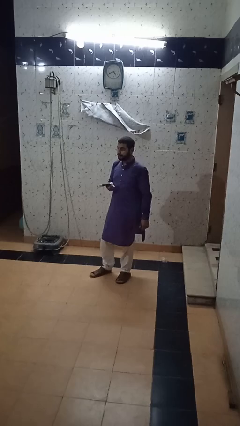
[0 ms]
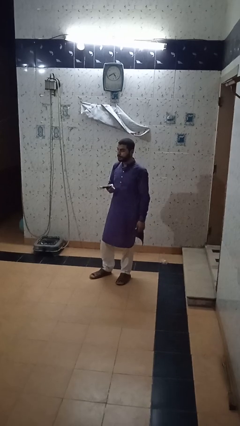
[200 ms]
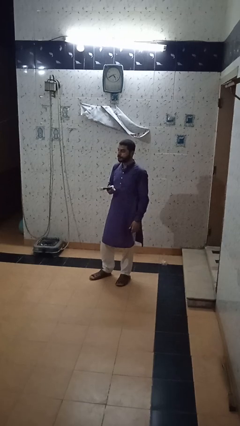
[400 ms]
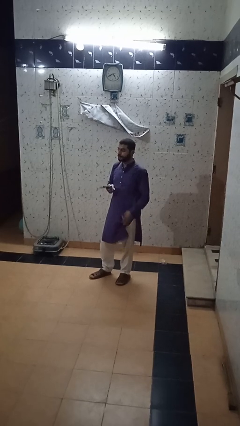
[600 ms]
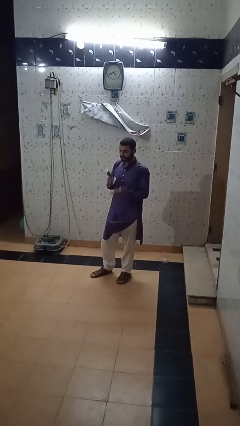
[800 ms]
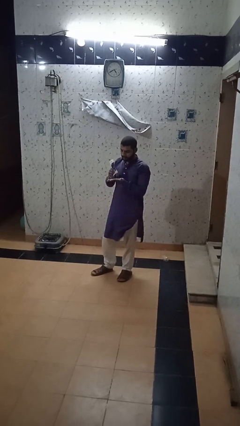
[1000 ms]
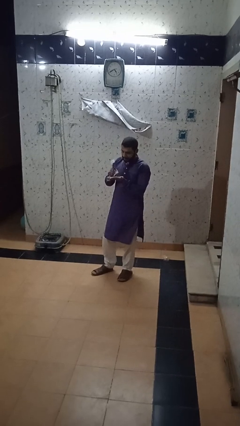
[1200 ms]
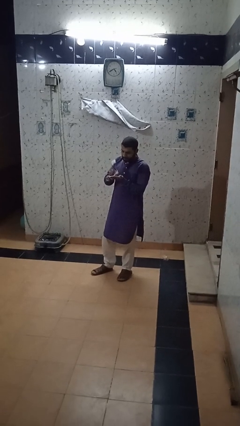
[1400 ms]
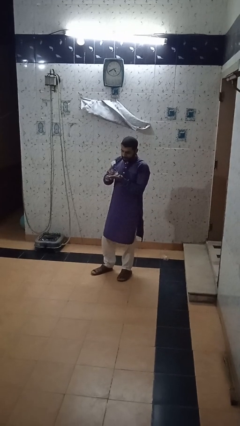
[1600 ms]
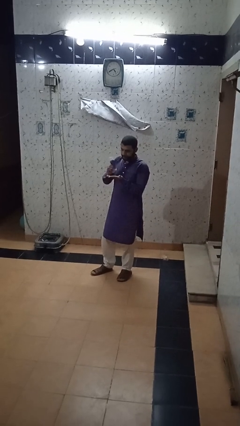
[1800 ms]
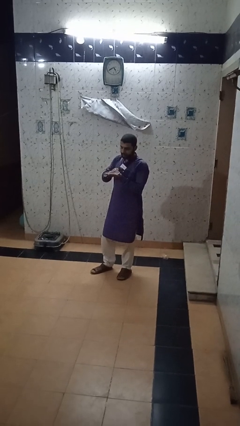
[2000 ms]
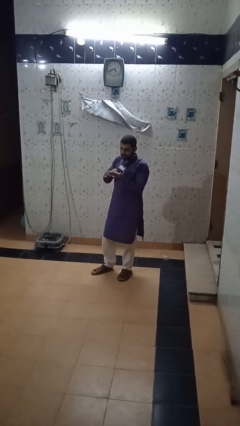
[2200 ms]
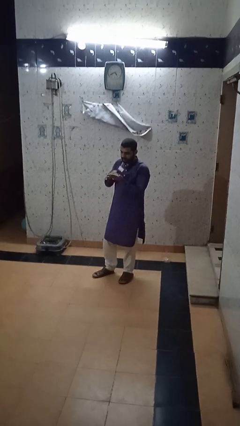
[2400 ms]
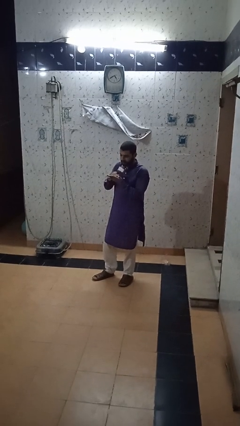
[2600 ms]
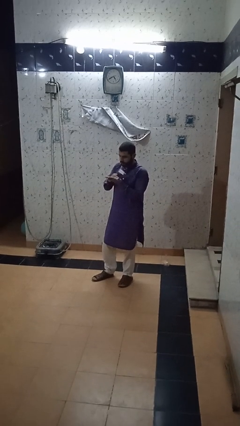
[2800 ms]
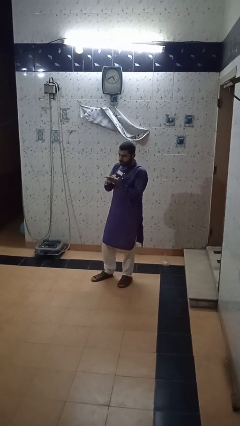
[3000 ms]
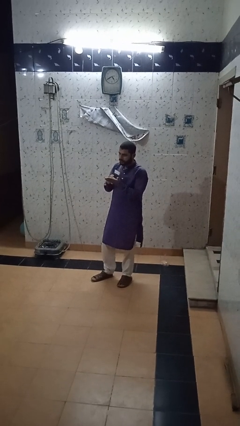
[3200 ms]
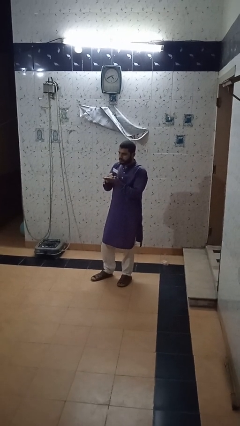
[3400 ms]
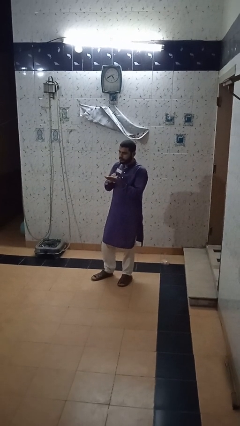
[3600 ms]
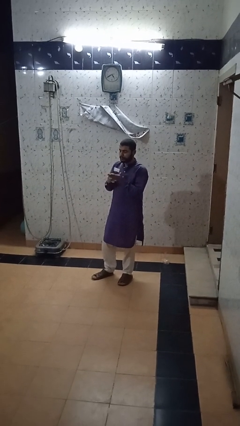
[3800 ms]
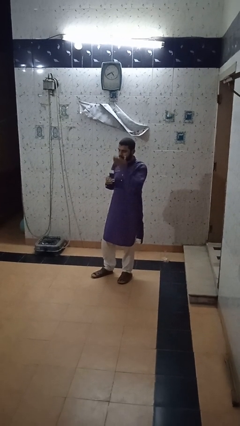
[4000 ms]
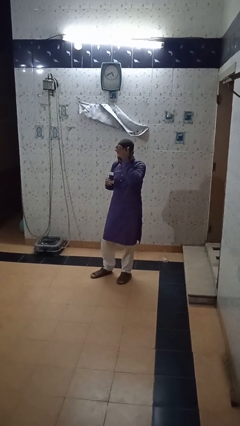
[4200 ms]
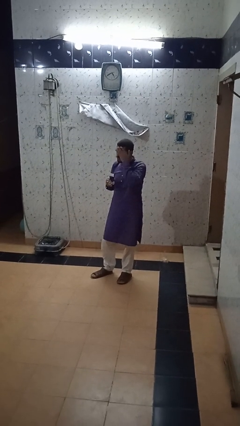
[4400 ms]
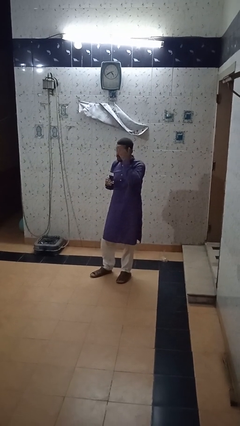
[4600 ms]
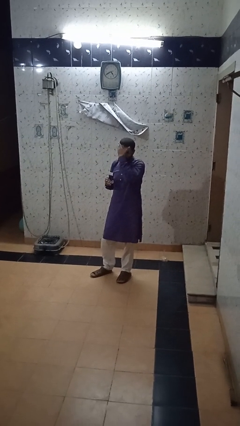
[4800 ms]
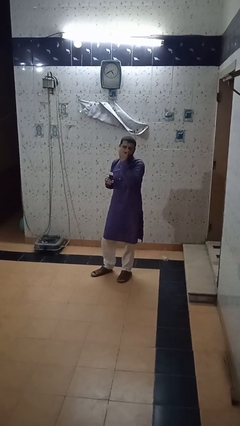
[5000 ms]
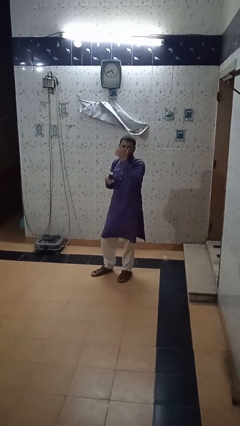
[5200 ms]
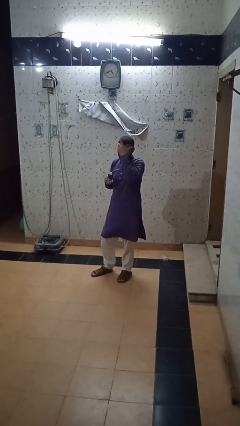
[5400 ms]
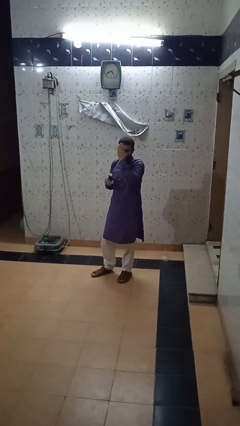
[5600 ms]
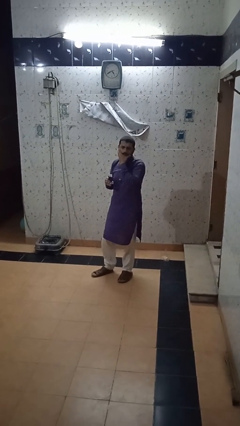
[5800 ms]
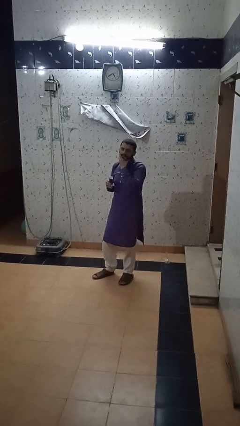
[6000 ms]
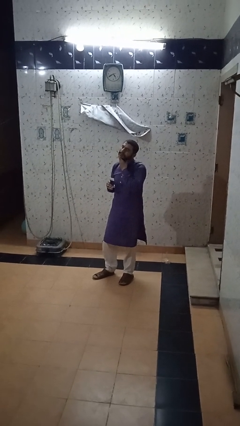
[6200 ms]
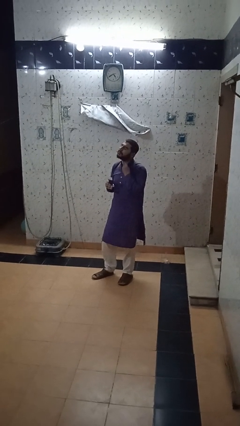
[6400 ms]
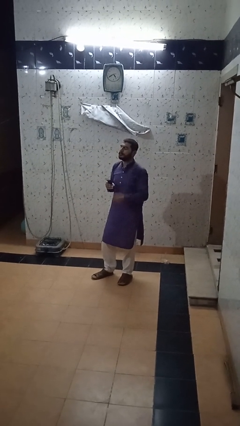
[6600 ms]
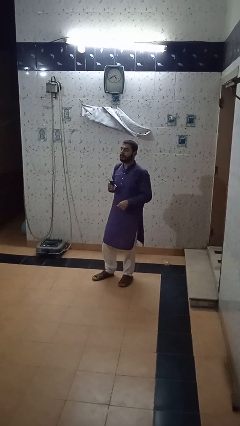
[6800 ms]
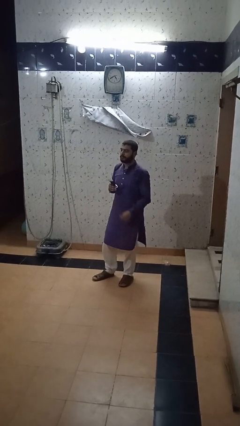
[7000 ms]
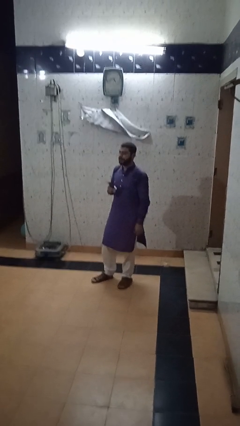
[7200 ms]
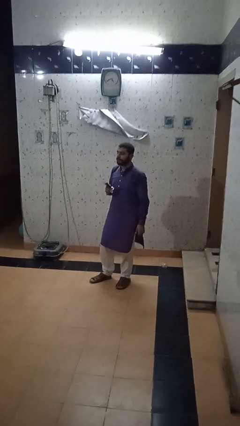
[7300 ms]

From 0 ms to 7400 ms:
person applies facial moisturizer

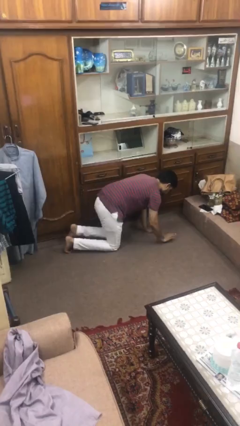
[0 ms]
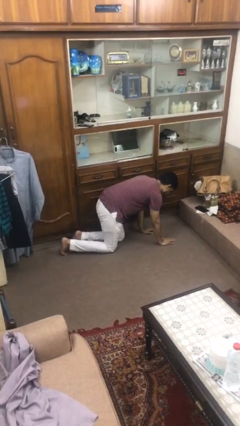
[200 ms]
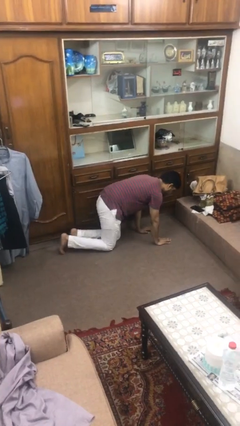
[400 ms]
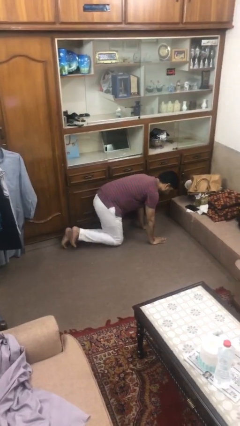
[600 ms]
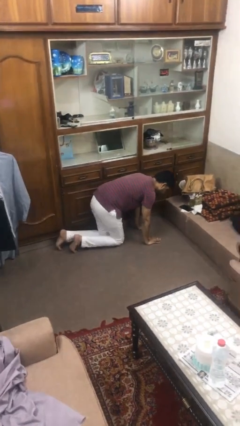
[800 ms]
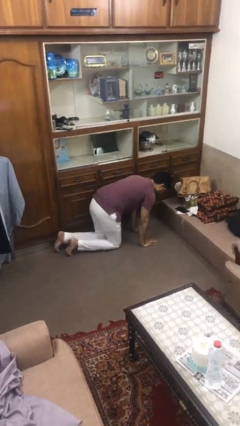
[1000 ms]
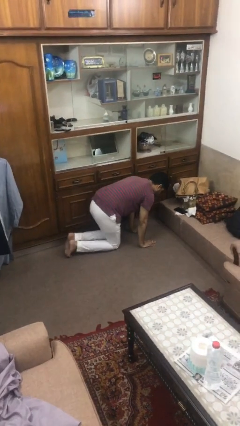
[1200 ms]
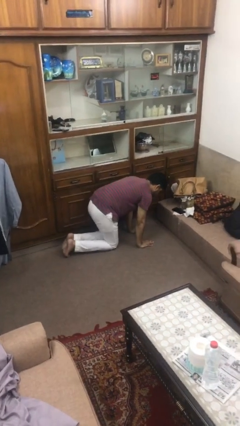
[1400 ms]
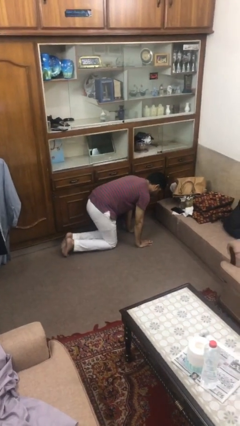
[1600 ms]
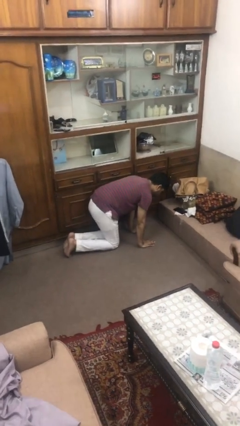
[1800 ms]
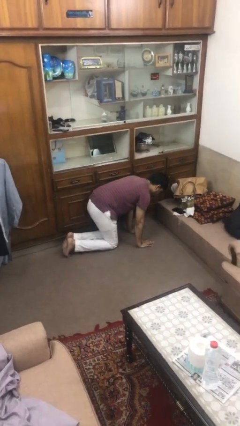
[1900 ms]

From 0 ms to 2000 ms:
person crawls

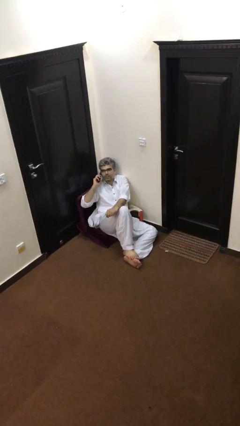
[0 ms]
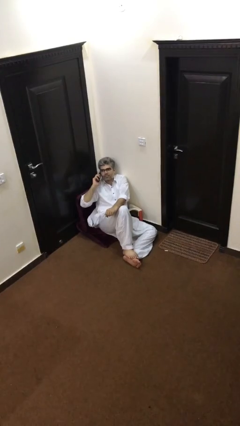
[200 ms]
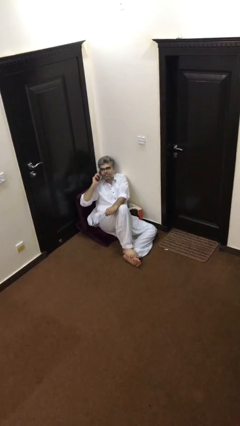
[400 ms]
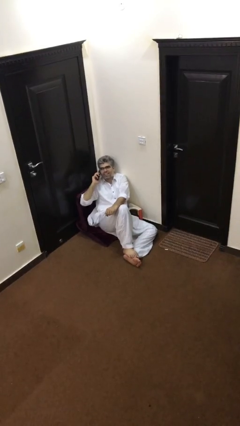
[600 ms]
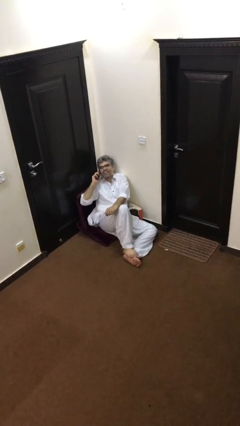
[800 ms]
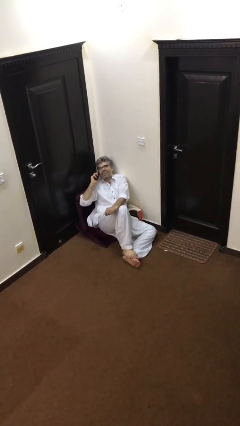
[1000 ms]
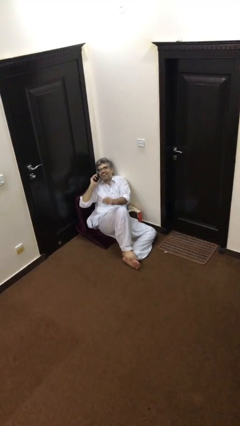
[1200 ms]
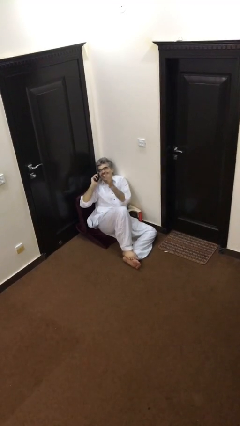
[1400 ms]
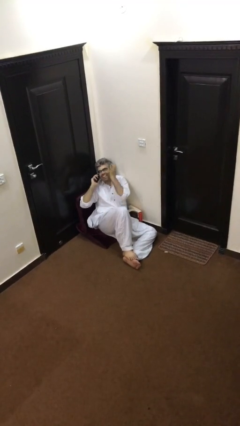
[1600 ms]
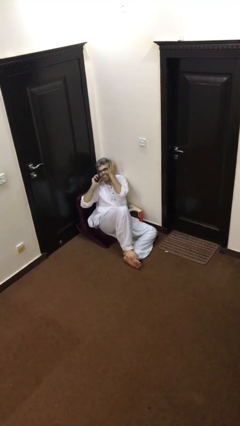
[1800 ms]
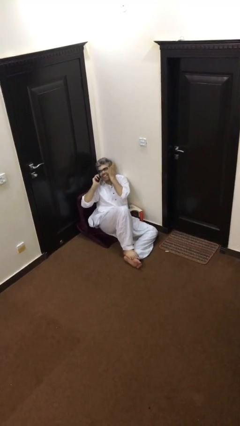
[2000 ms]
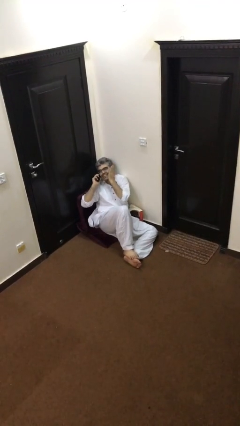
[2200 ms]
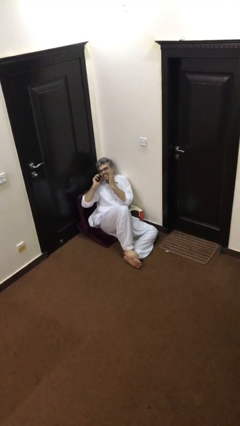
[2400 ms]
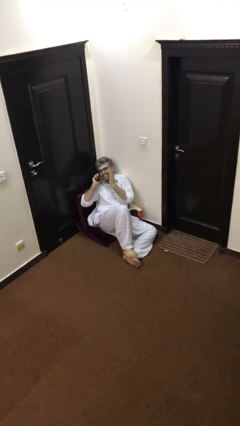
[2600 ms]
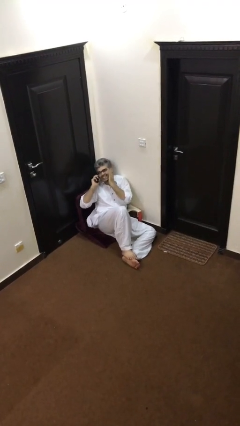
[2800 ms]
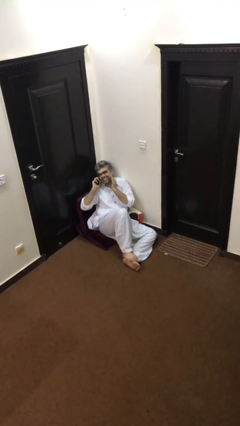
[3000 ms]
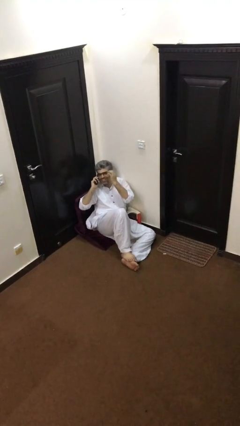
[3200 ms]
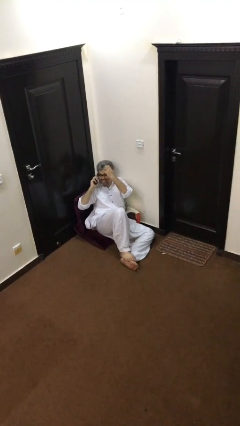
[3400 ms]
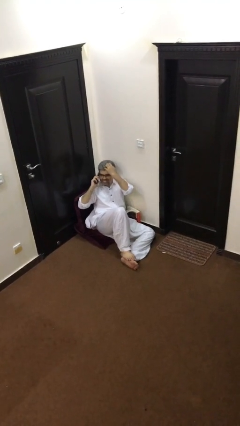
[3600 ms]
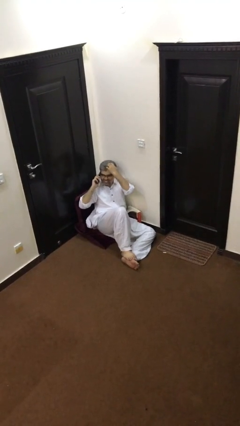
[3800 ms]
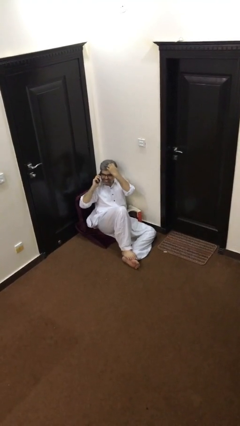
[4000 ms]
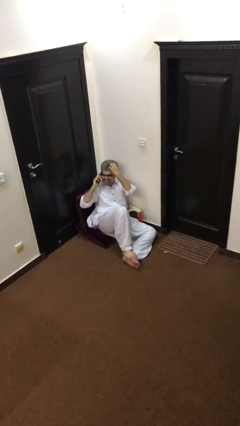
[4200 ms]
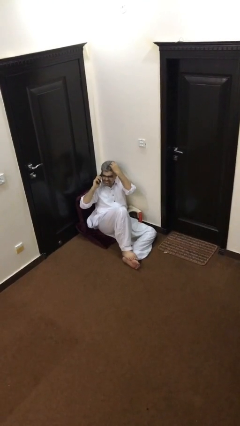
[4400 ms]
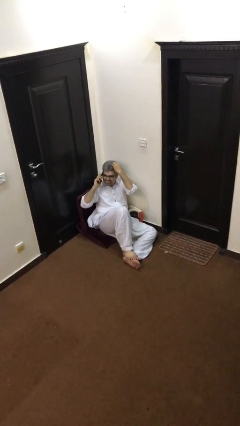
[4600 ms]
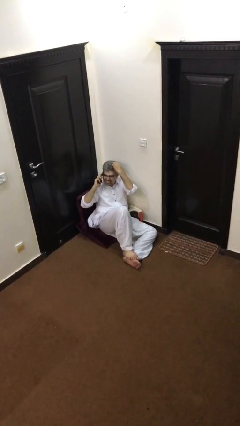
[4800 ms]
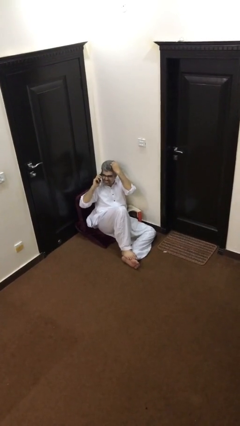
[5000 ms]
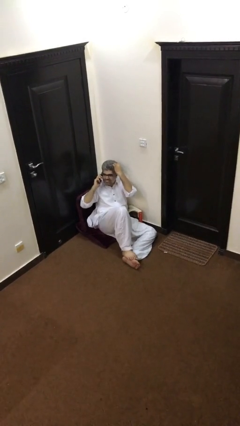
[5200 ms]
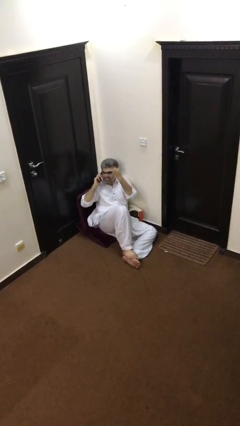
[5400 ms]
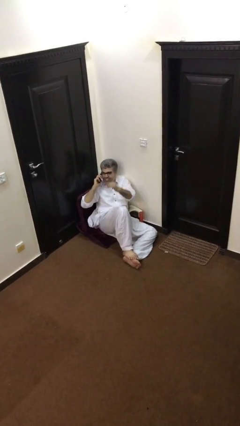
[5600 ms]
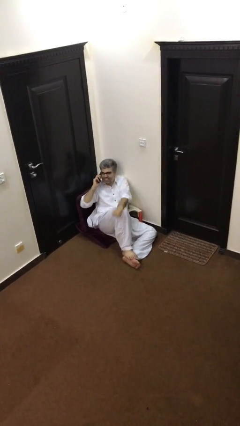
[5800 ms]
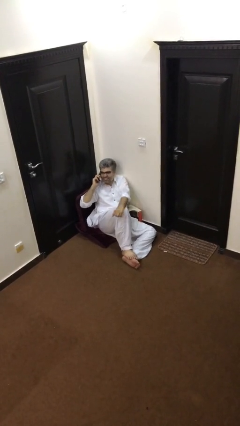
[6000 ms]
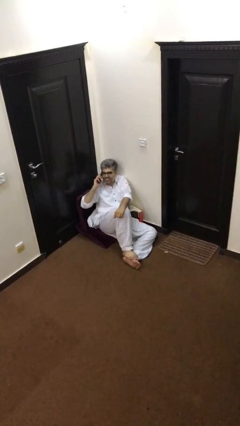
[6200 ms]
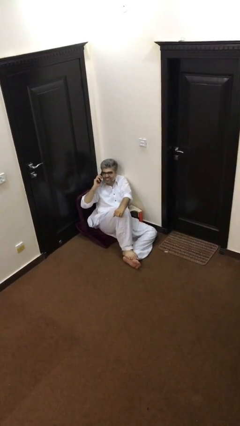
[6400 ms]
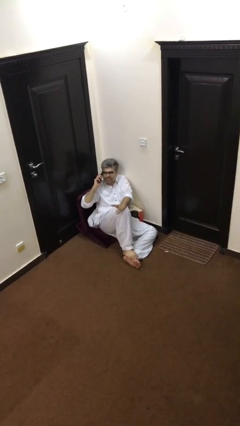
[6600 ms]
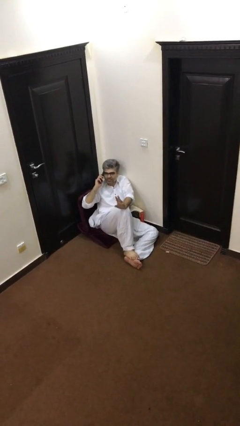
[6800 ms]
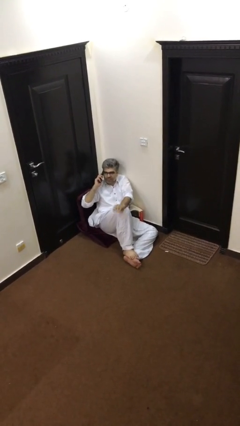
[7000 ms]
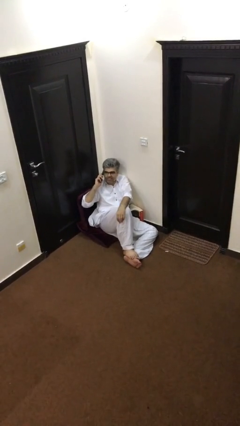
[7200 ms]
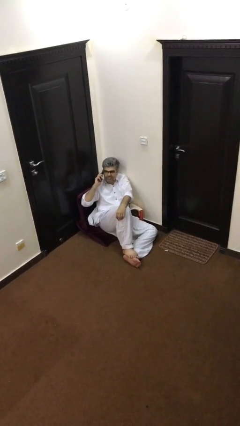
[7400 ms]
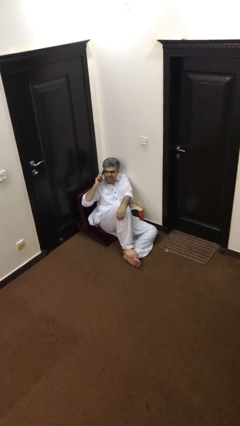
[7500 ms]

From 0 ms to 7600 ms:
person talks on phone

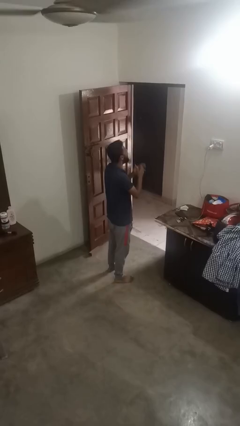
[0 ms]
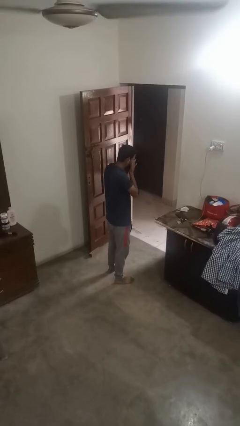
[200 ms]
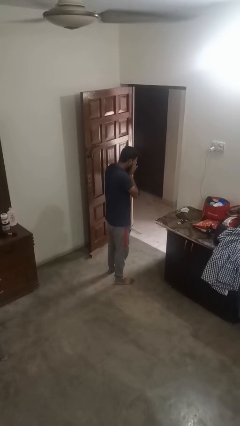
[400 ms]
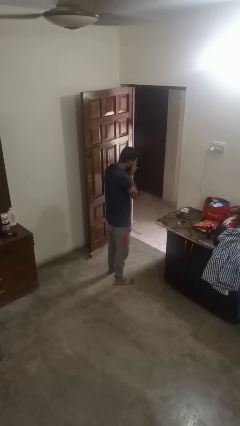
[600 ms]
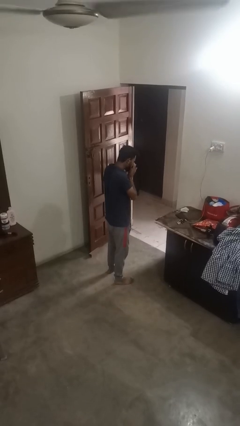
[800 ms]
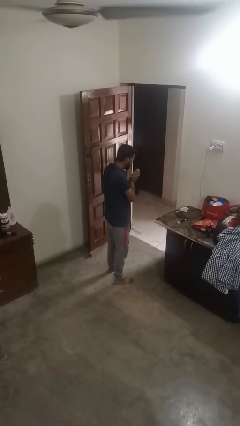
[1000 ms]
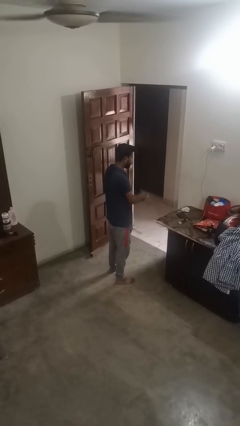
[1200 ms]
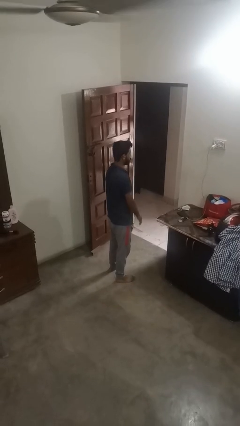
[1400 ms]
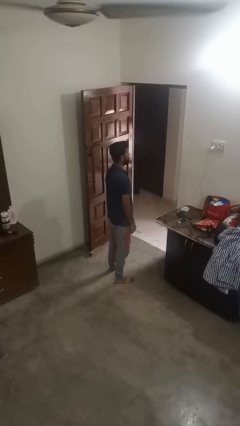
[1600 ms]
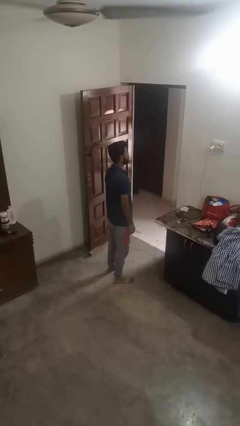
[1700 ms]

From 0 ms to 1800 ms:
person sneezes into hand
